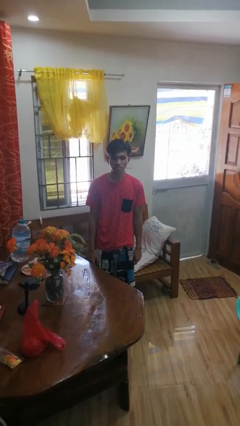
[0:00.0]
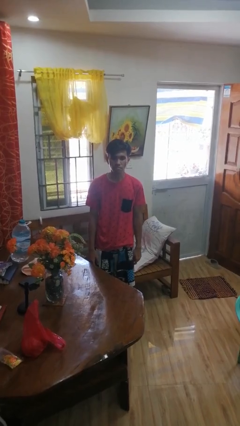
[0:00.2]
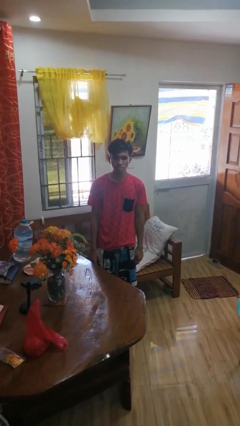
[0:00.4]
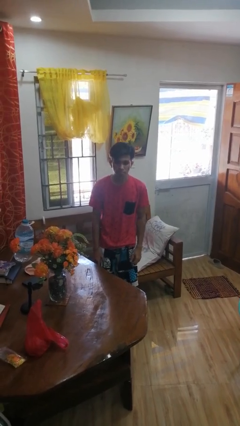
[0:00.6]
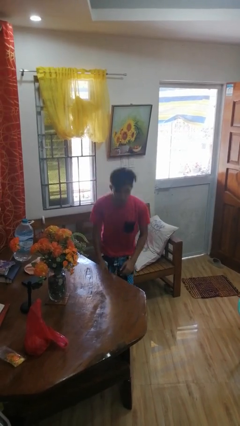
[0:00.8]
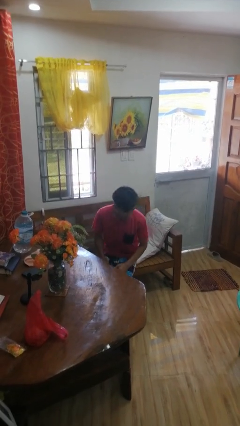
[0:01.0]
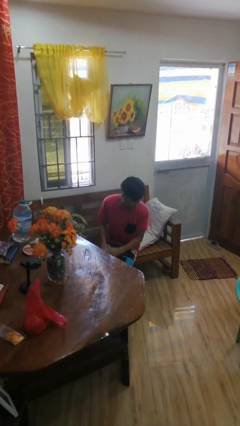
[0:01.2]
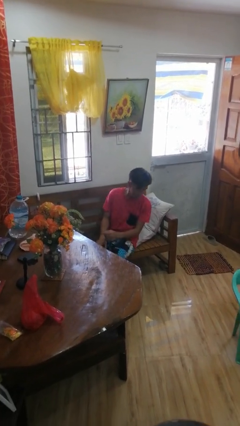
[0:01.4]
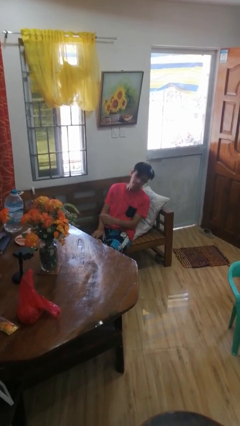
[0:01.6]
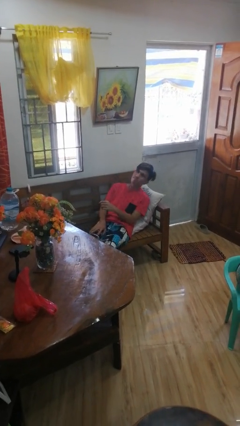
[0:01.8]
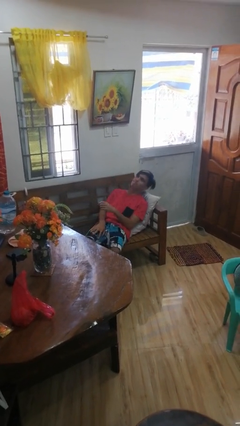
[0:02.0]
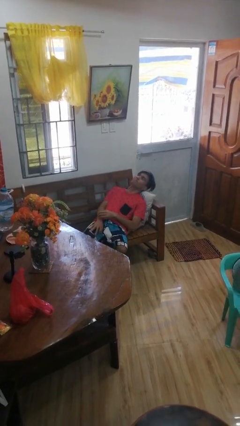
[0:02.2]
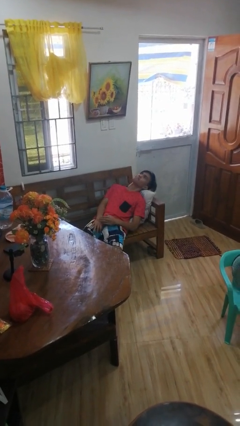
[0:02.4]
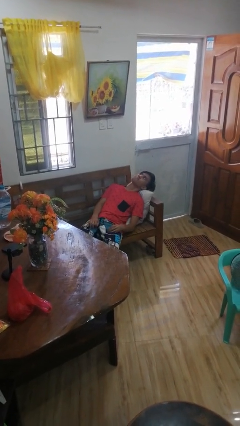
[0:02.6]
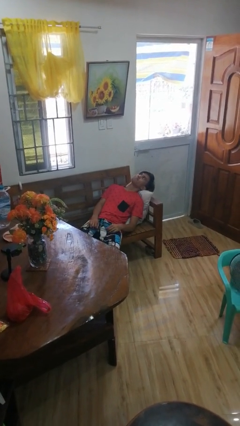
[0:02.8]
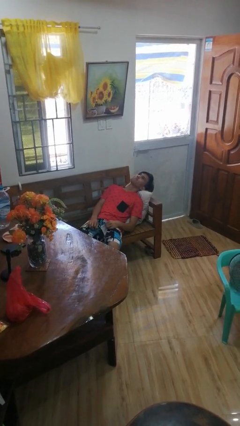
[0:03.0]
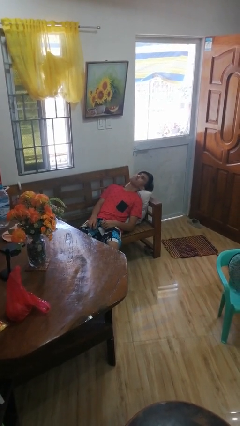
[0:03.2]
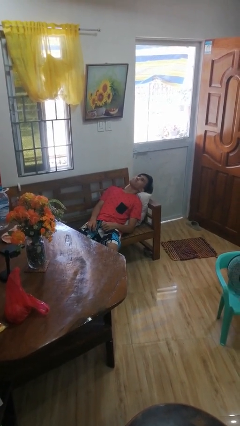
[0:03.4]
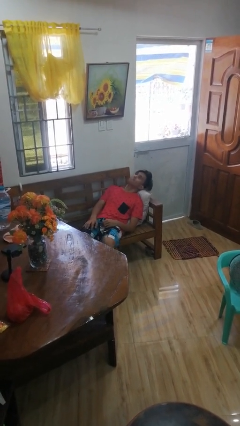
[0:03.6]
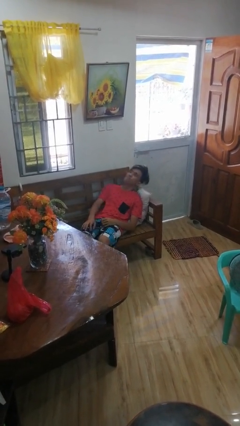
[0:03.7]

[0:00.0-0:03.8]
person lies down on couch

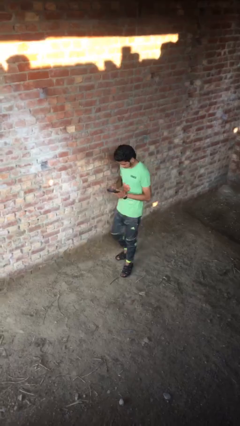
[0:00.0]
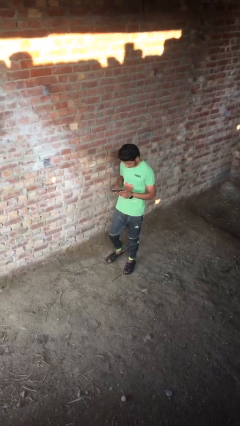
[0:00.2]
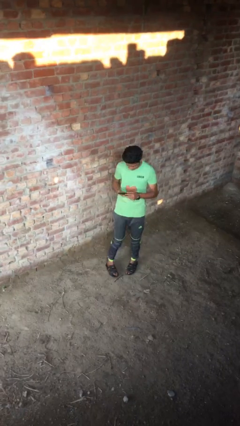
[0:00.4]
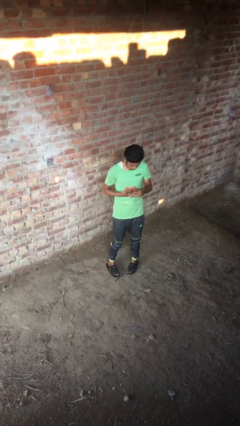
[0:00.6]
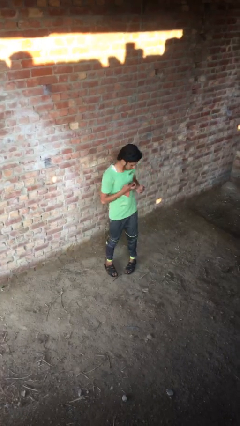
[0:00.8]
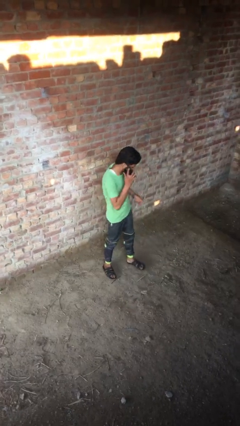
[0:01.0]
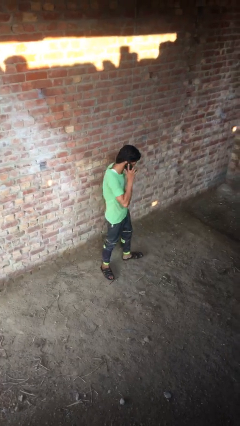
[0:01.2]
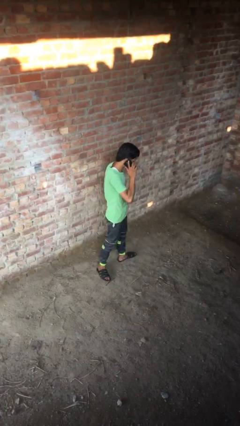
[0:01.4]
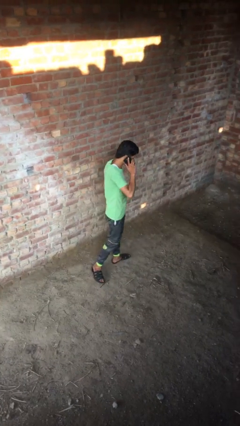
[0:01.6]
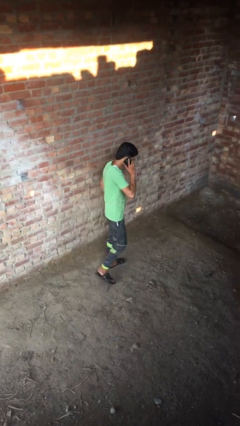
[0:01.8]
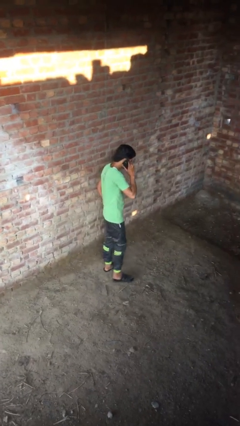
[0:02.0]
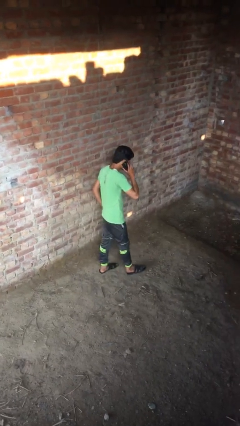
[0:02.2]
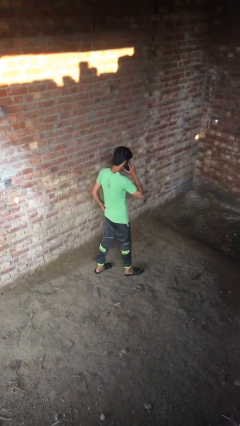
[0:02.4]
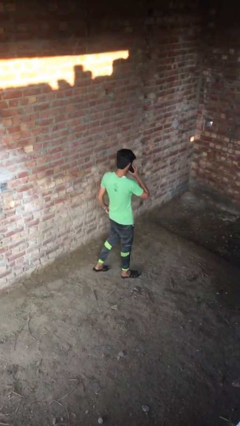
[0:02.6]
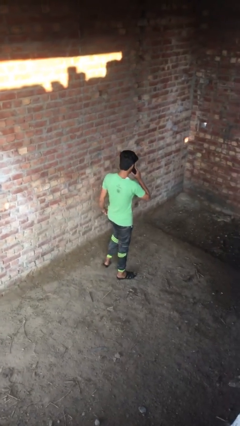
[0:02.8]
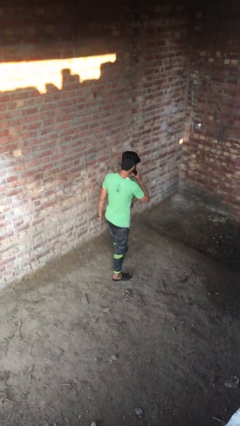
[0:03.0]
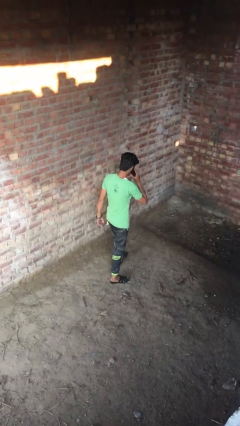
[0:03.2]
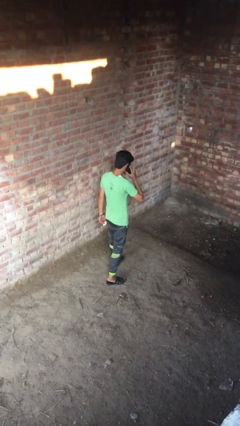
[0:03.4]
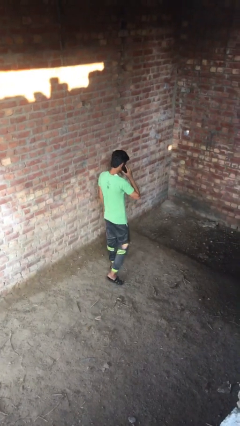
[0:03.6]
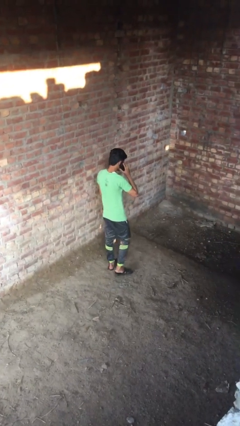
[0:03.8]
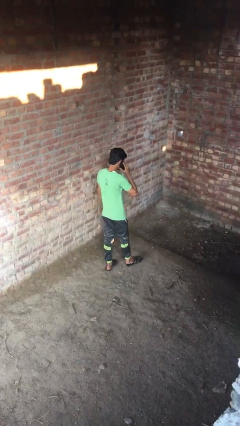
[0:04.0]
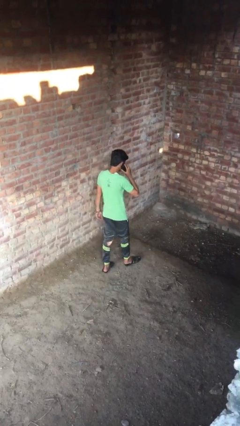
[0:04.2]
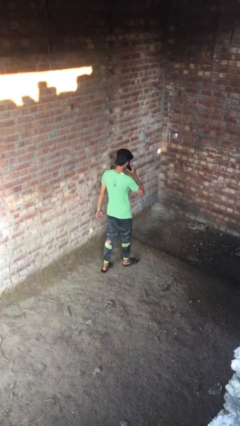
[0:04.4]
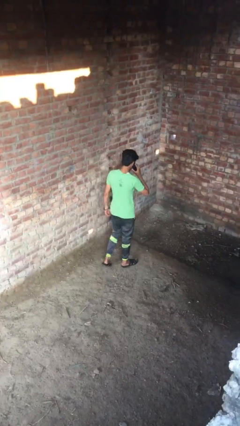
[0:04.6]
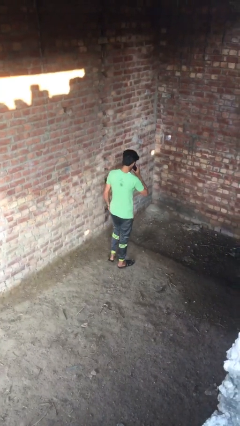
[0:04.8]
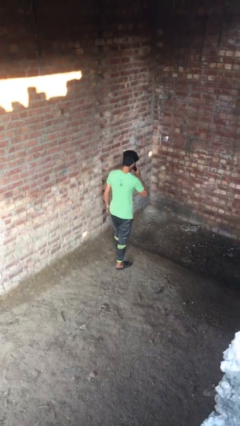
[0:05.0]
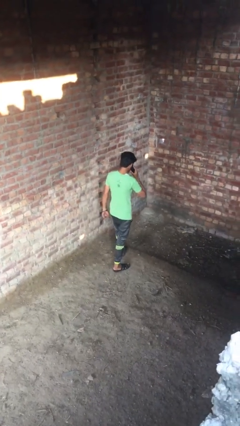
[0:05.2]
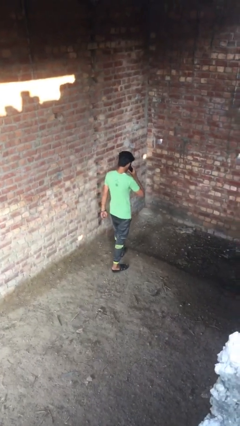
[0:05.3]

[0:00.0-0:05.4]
person talks on phone

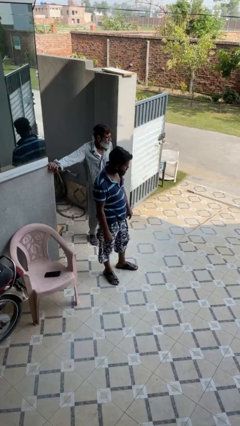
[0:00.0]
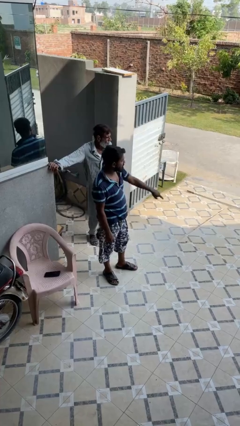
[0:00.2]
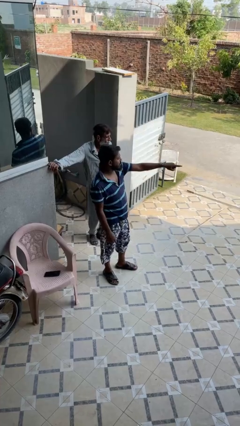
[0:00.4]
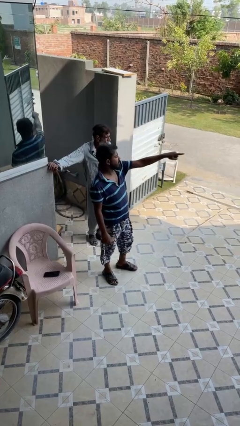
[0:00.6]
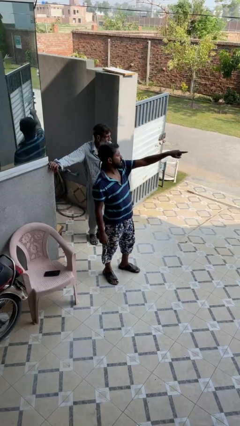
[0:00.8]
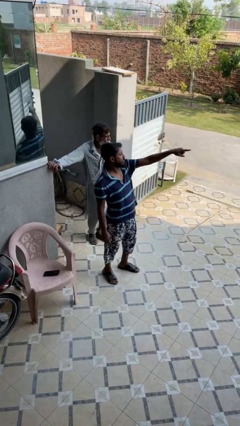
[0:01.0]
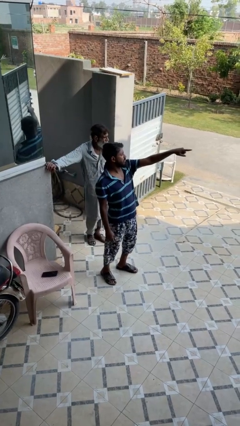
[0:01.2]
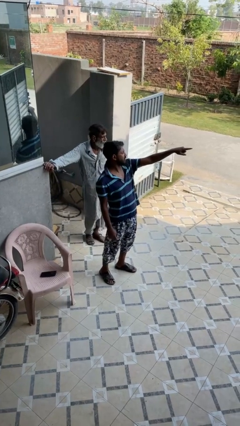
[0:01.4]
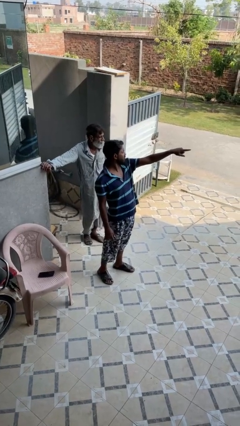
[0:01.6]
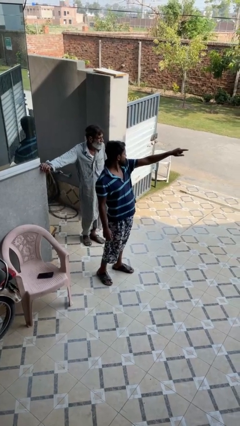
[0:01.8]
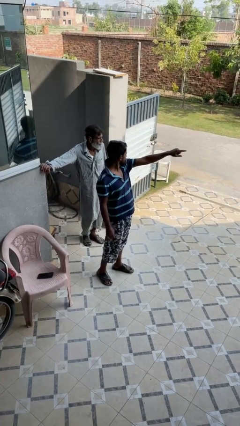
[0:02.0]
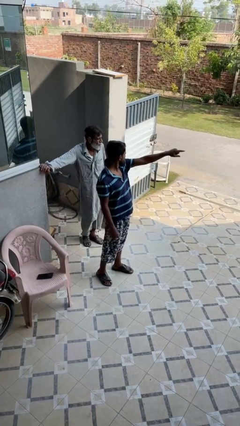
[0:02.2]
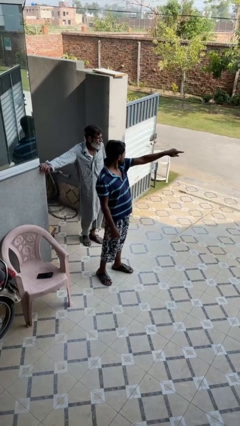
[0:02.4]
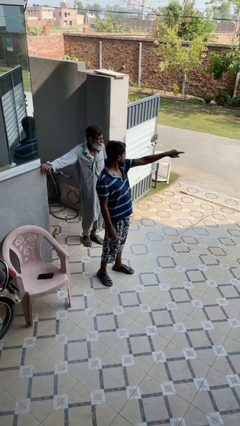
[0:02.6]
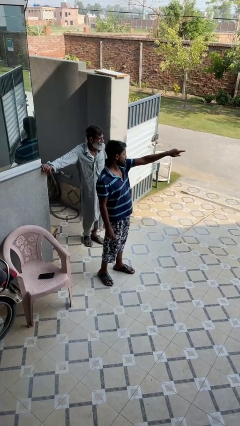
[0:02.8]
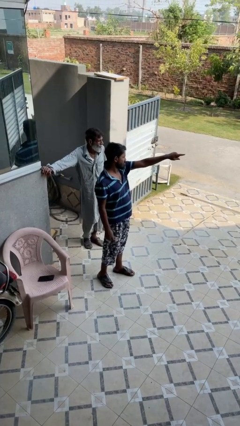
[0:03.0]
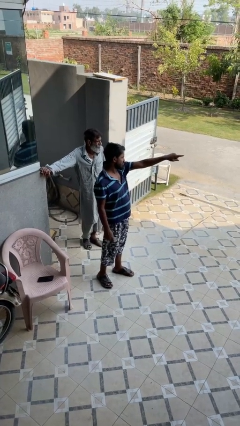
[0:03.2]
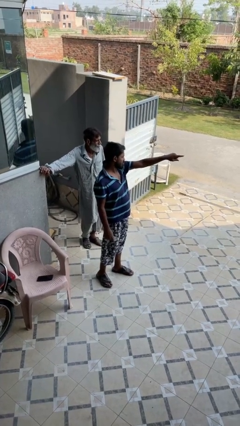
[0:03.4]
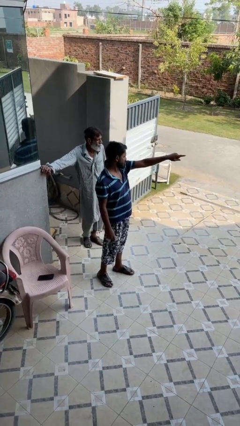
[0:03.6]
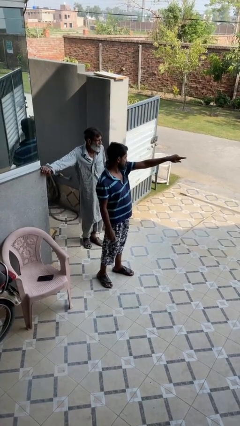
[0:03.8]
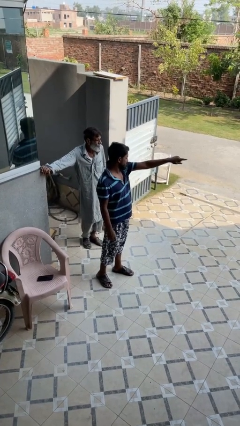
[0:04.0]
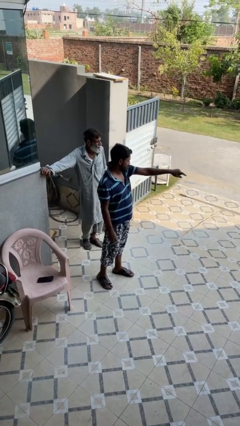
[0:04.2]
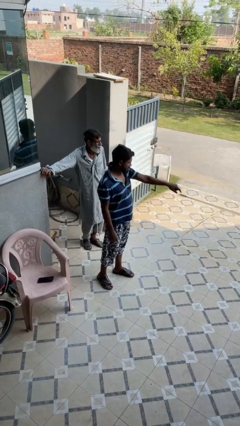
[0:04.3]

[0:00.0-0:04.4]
person points at person

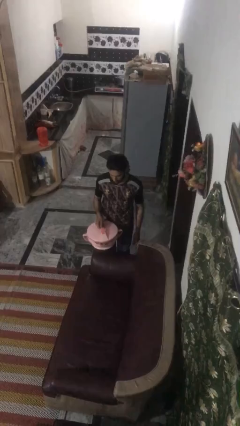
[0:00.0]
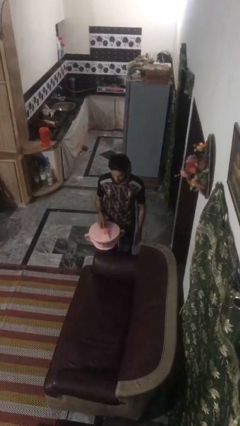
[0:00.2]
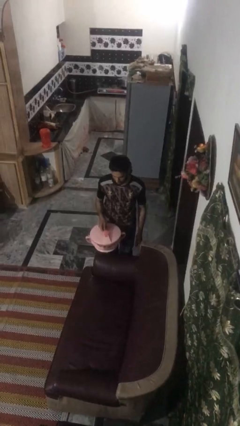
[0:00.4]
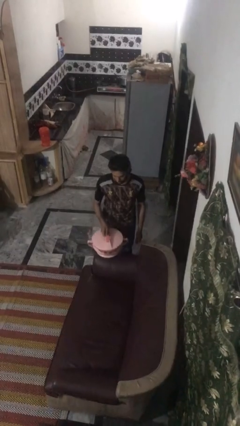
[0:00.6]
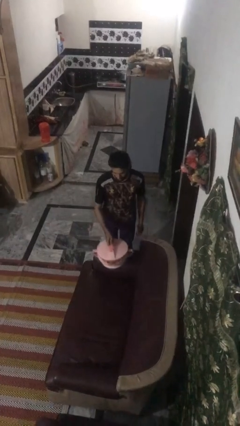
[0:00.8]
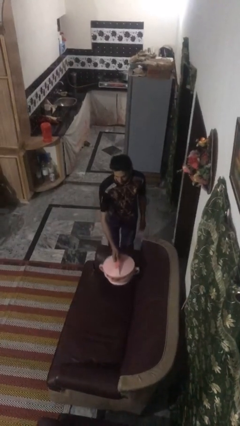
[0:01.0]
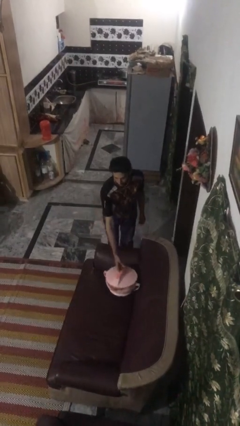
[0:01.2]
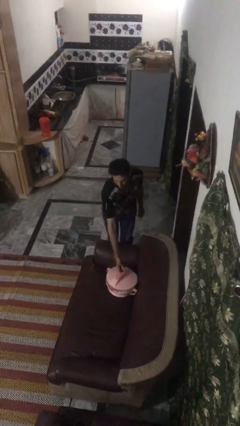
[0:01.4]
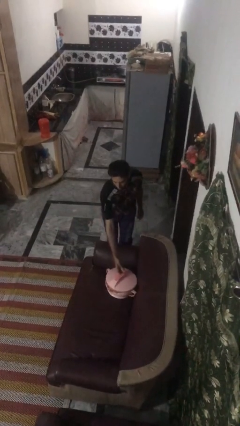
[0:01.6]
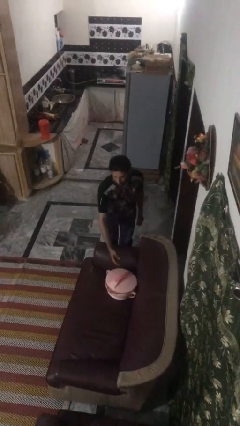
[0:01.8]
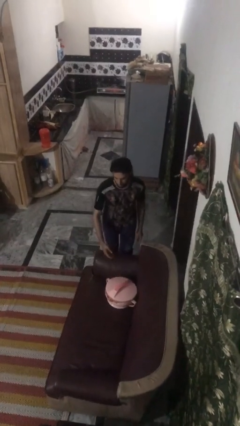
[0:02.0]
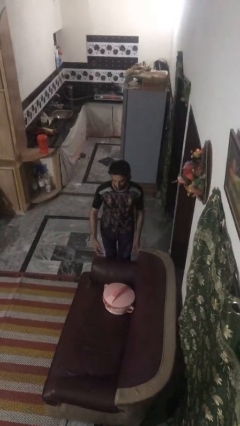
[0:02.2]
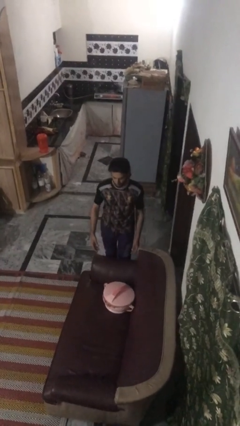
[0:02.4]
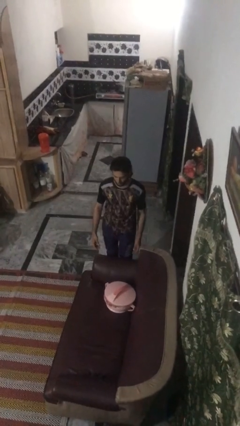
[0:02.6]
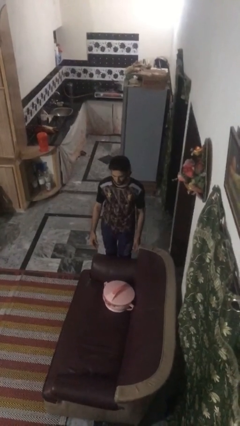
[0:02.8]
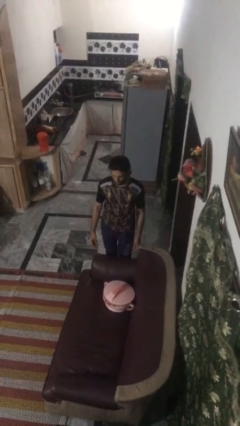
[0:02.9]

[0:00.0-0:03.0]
person puts down object on couch

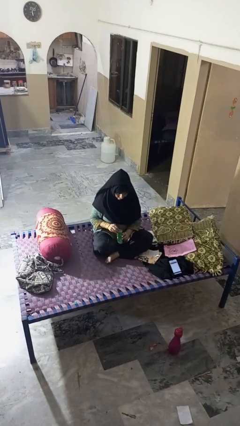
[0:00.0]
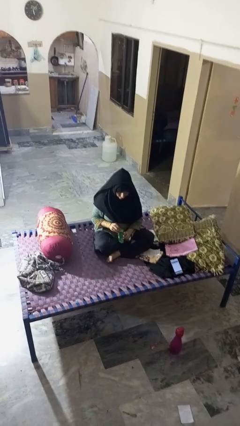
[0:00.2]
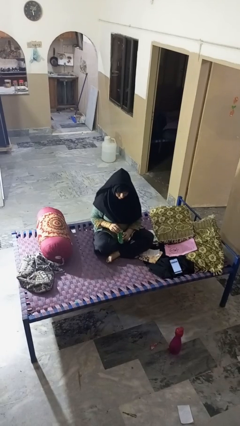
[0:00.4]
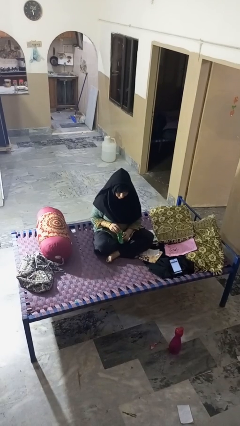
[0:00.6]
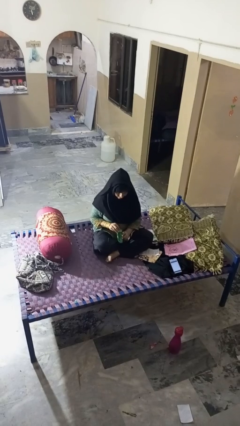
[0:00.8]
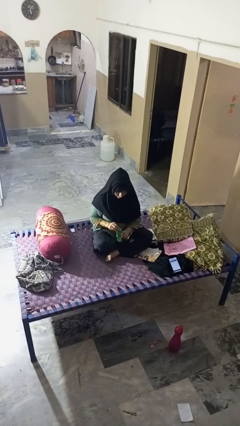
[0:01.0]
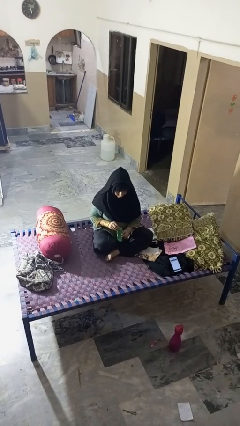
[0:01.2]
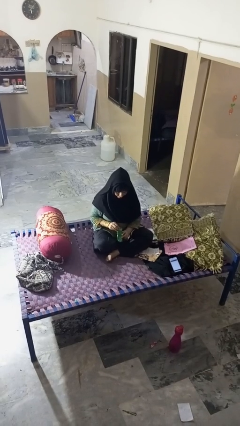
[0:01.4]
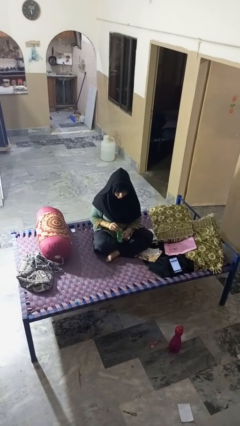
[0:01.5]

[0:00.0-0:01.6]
person opens can with can opener
